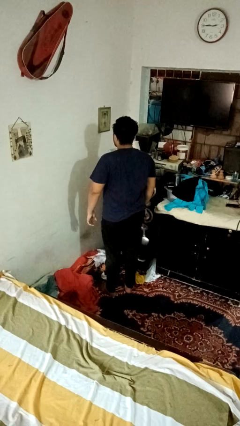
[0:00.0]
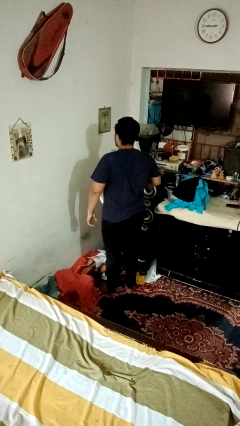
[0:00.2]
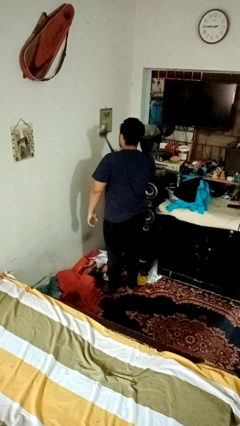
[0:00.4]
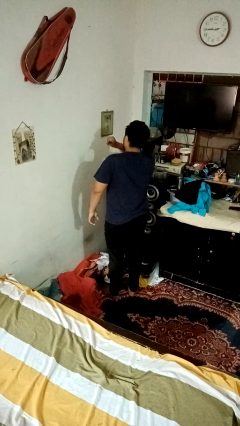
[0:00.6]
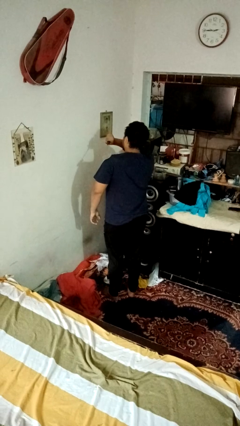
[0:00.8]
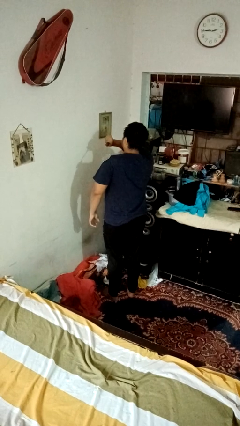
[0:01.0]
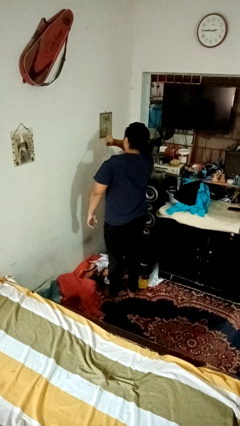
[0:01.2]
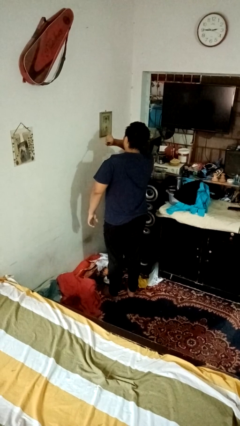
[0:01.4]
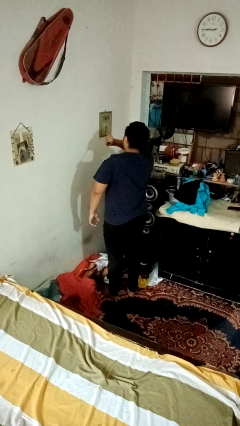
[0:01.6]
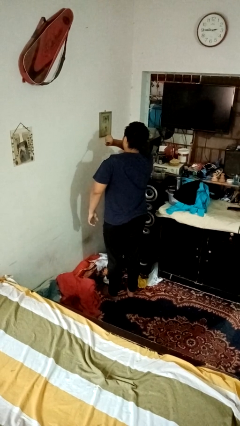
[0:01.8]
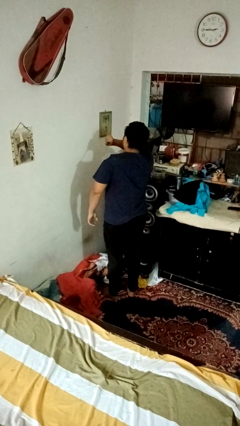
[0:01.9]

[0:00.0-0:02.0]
person swats bug

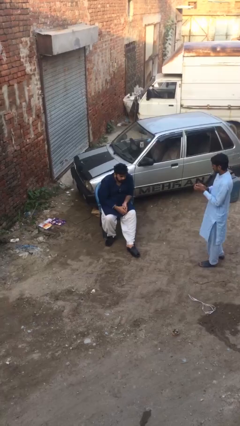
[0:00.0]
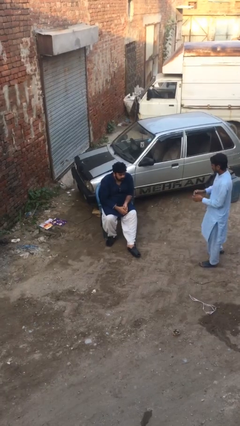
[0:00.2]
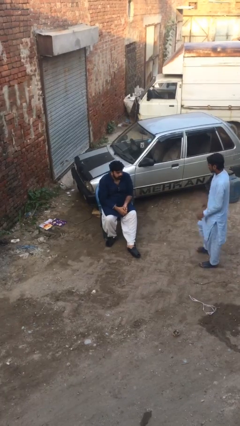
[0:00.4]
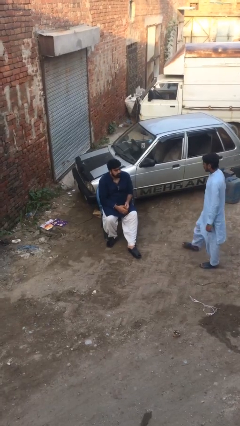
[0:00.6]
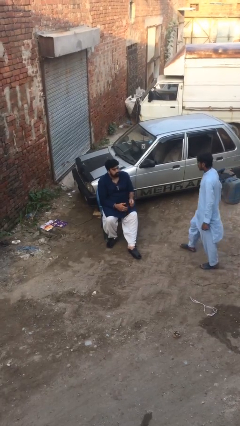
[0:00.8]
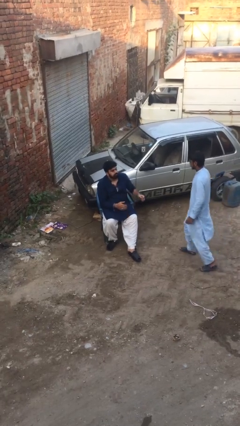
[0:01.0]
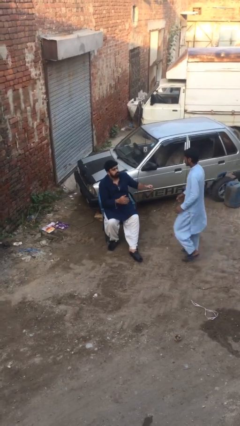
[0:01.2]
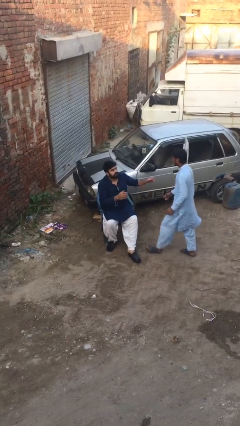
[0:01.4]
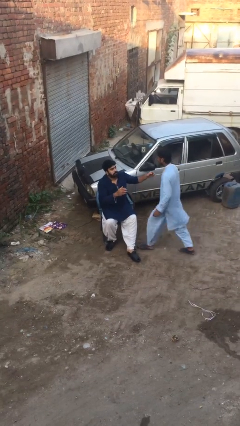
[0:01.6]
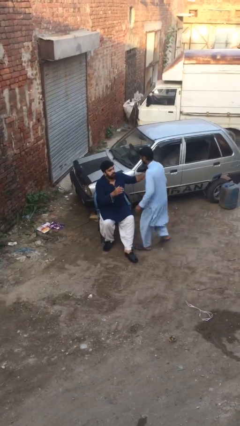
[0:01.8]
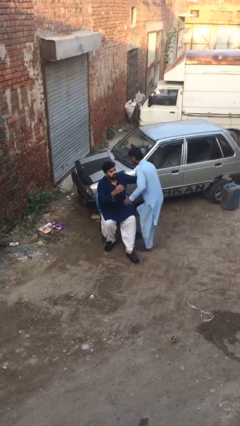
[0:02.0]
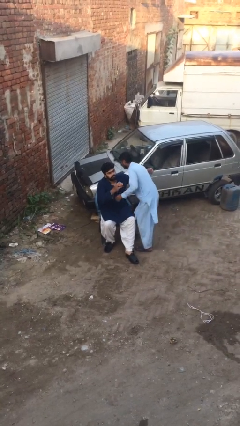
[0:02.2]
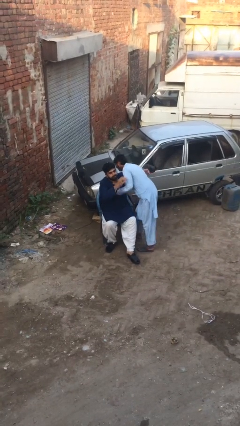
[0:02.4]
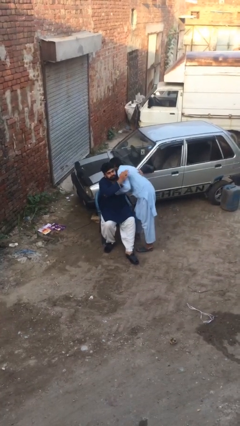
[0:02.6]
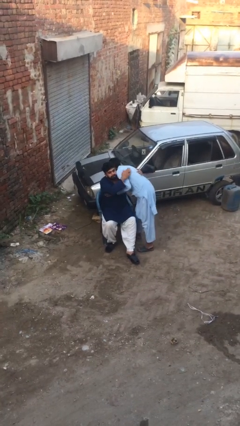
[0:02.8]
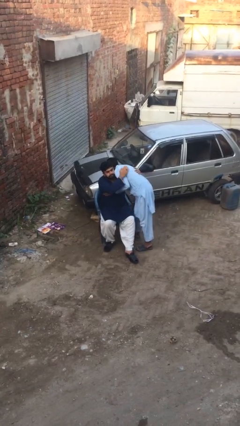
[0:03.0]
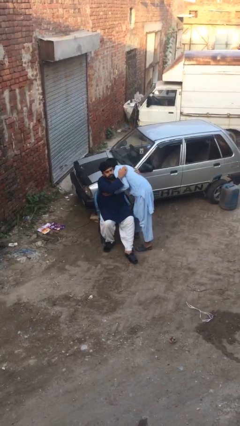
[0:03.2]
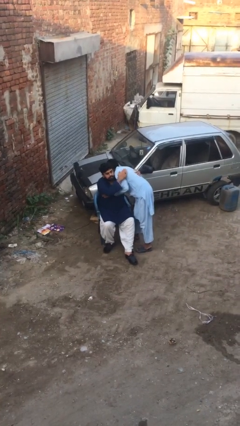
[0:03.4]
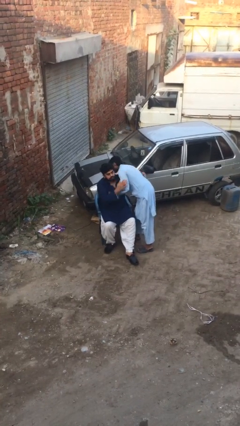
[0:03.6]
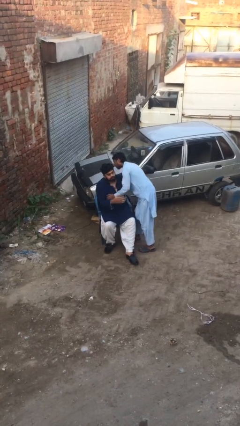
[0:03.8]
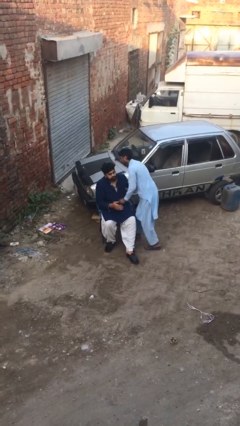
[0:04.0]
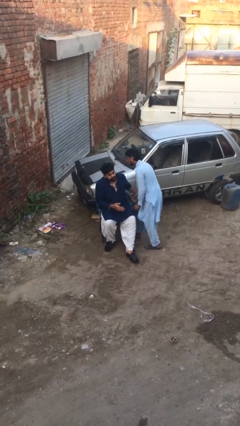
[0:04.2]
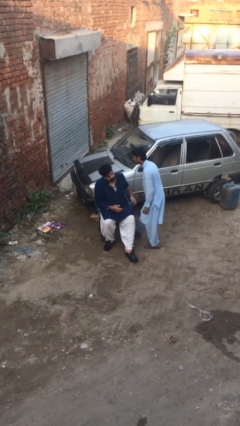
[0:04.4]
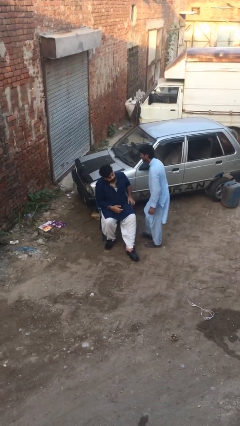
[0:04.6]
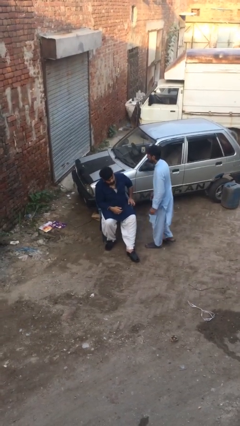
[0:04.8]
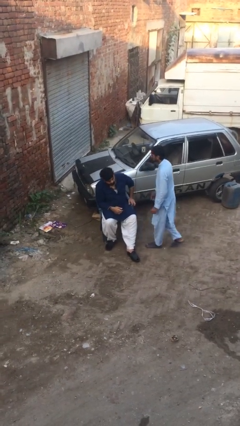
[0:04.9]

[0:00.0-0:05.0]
person embraces person
